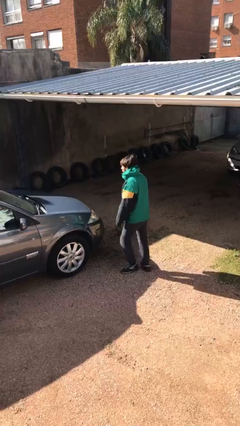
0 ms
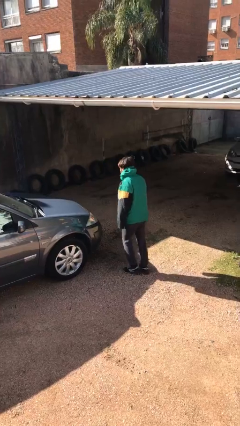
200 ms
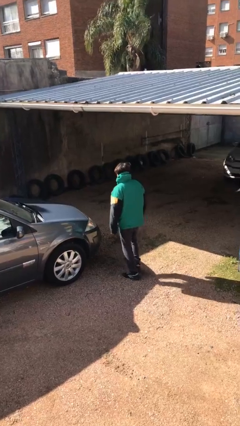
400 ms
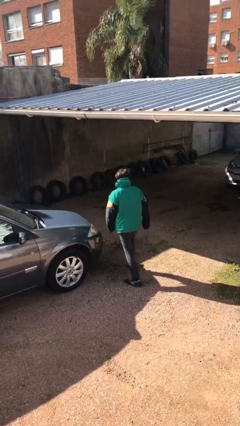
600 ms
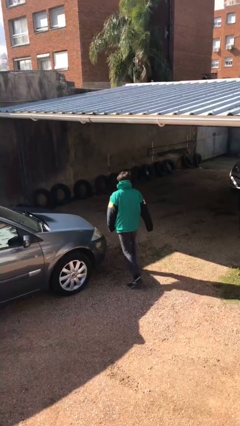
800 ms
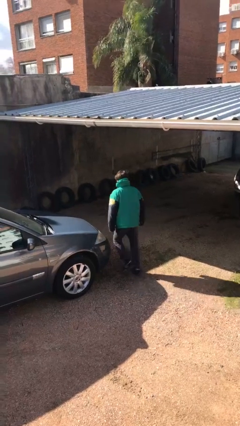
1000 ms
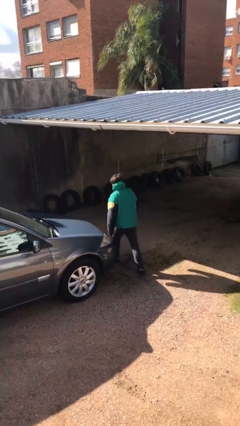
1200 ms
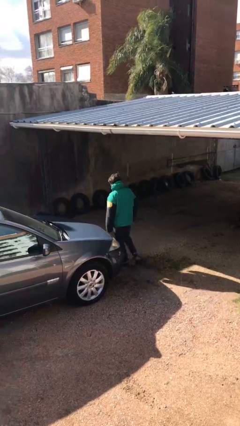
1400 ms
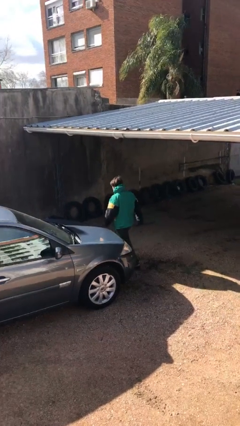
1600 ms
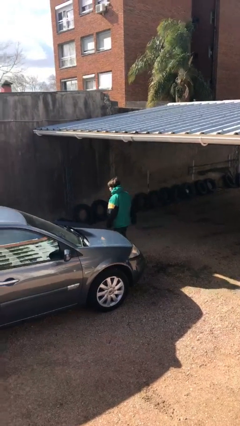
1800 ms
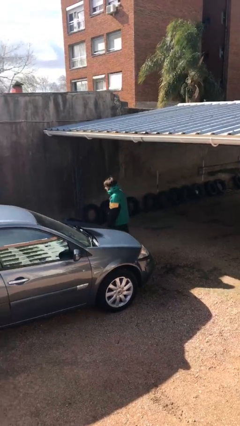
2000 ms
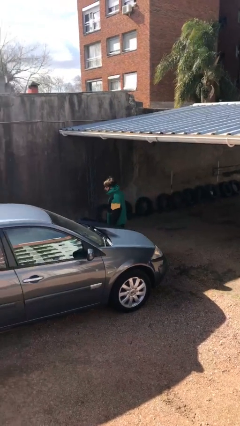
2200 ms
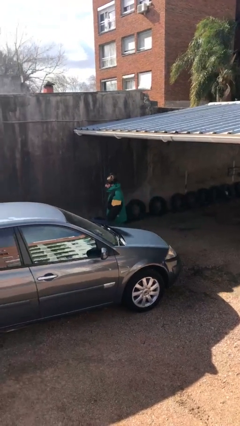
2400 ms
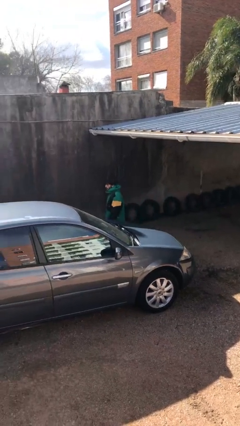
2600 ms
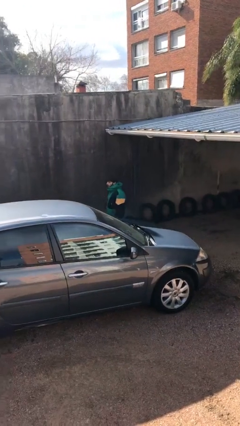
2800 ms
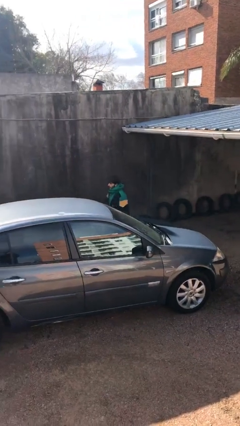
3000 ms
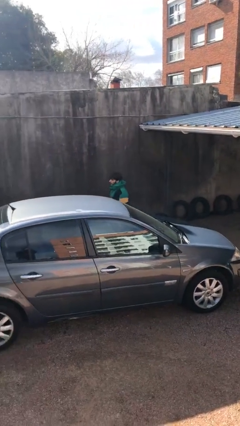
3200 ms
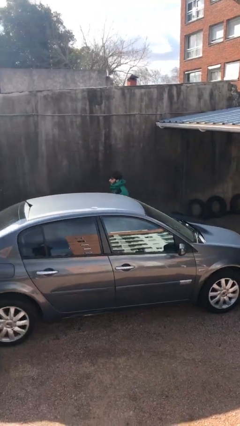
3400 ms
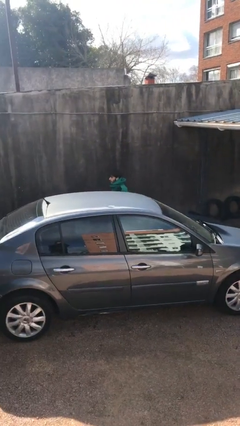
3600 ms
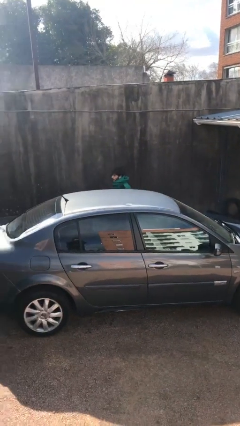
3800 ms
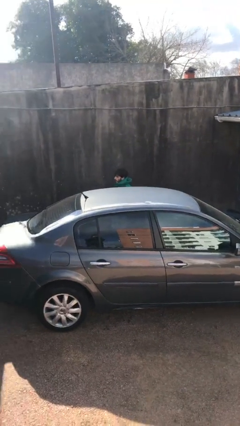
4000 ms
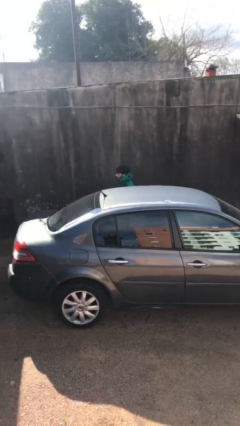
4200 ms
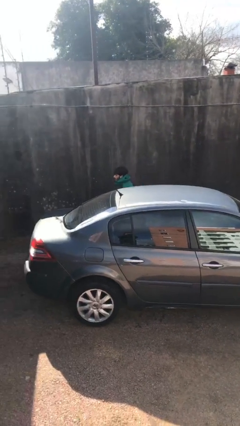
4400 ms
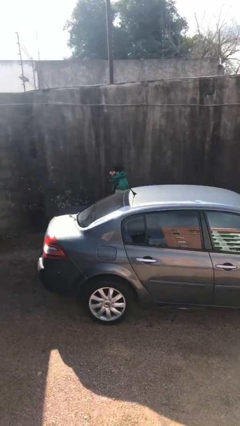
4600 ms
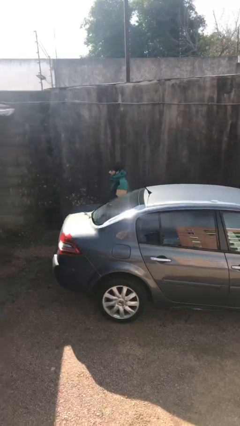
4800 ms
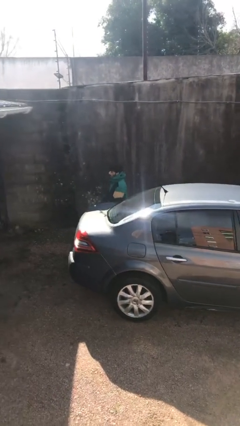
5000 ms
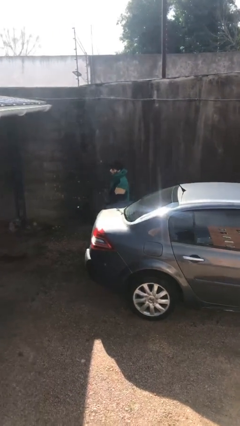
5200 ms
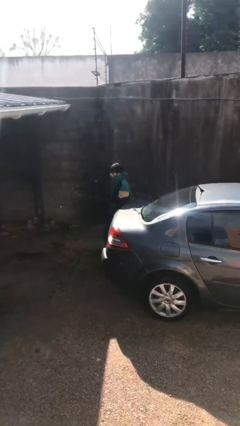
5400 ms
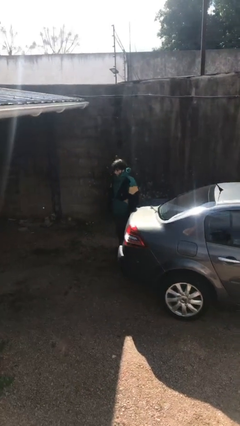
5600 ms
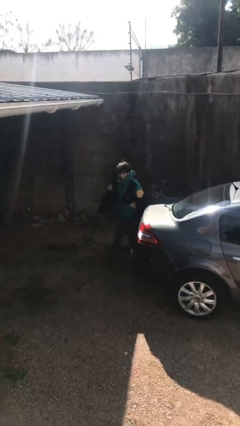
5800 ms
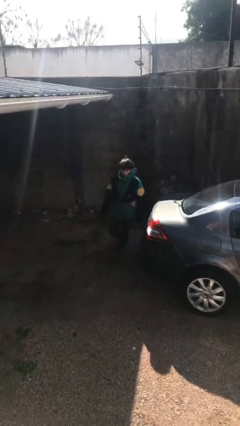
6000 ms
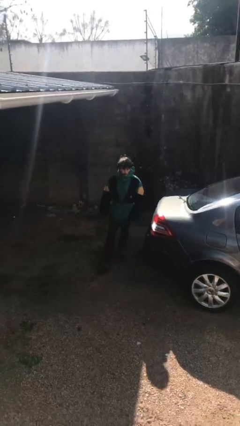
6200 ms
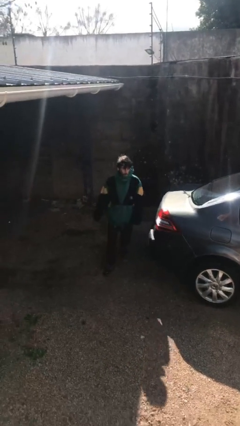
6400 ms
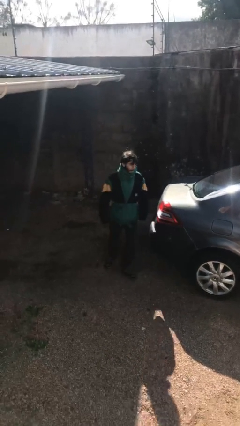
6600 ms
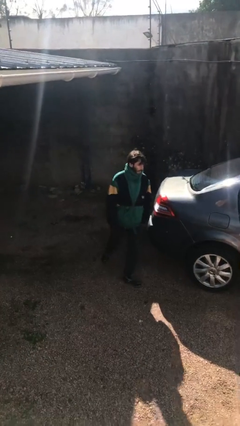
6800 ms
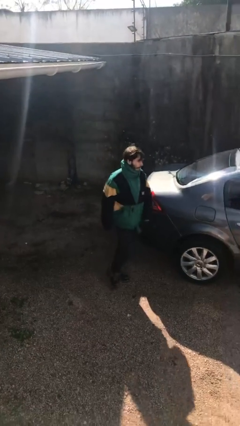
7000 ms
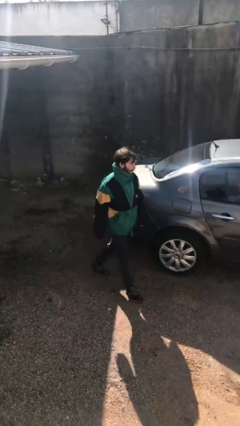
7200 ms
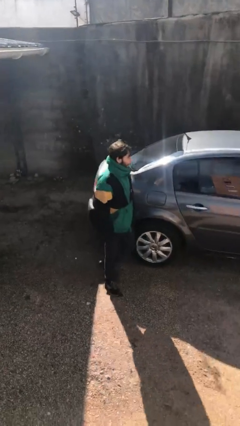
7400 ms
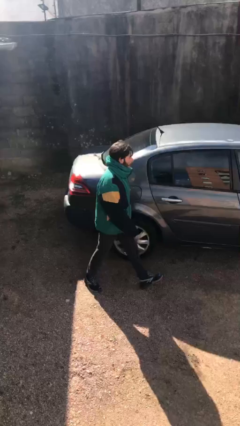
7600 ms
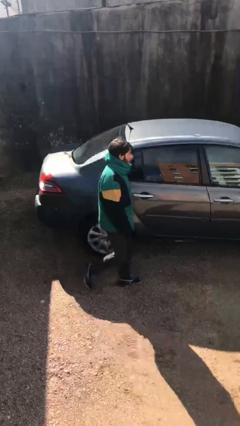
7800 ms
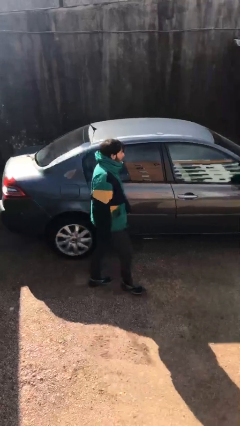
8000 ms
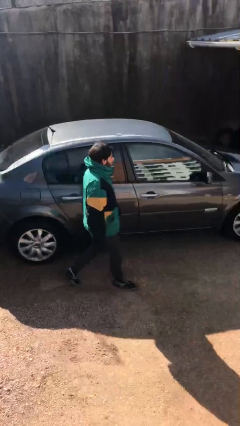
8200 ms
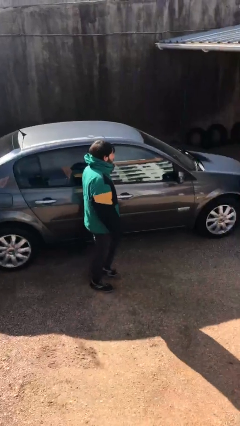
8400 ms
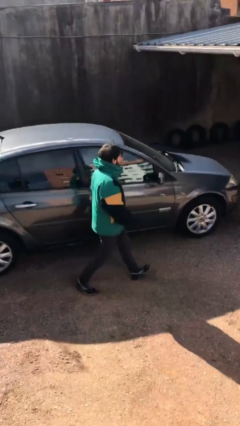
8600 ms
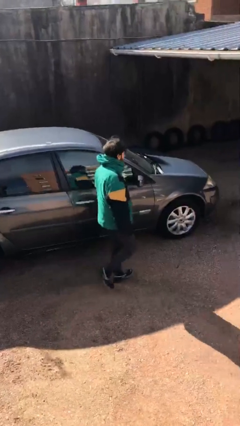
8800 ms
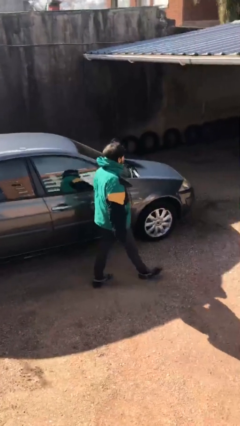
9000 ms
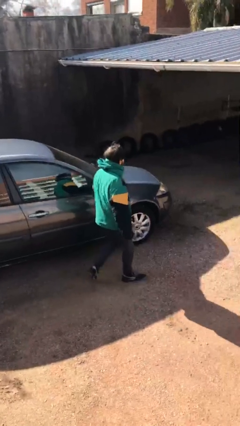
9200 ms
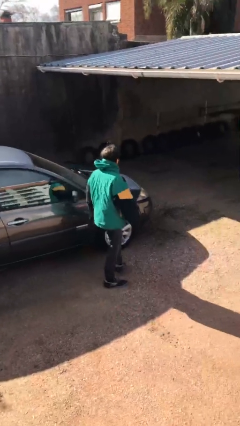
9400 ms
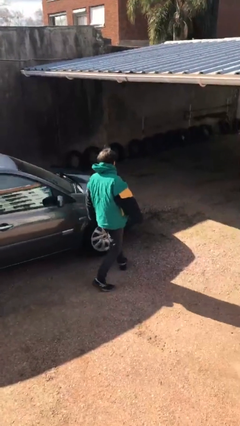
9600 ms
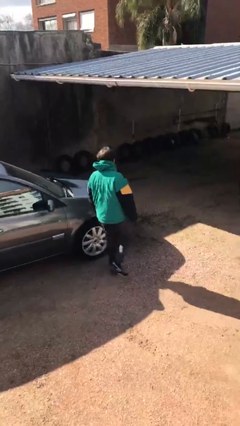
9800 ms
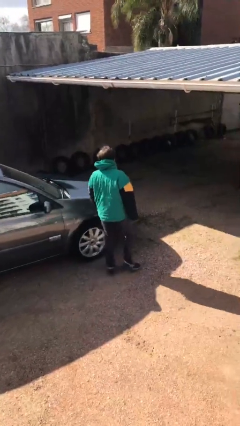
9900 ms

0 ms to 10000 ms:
person walks around car

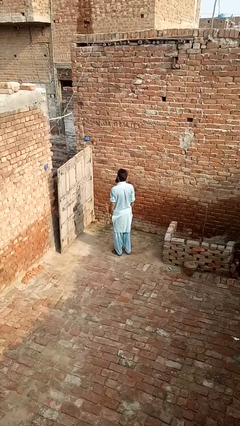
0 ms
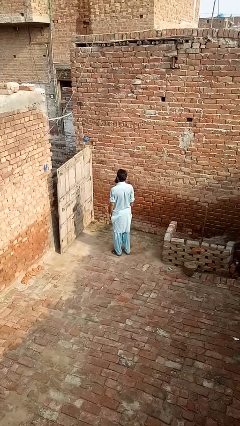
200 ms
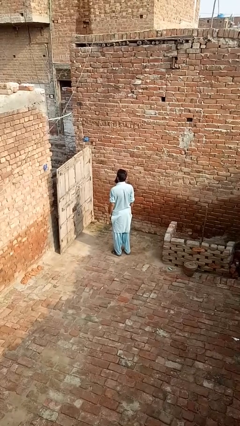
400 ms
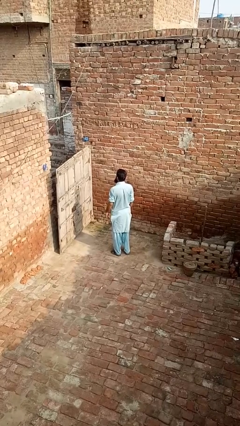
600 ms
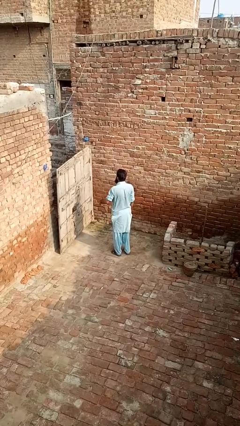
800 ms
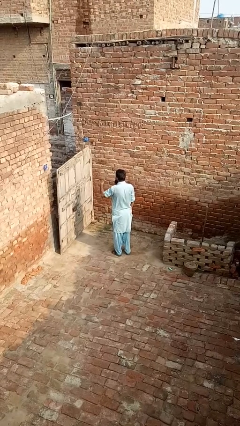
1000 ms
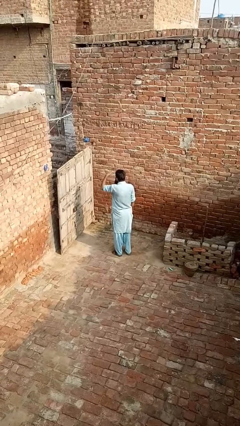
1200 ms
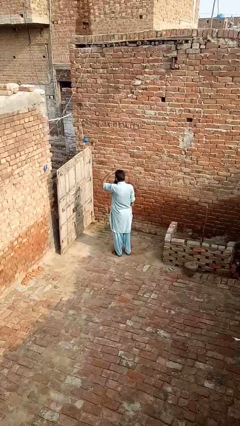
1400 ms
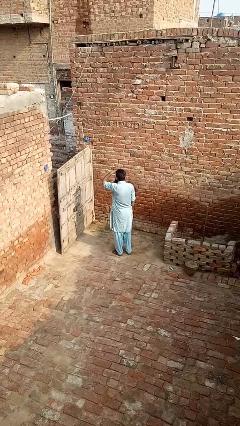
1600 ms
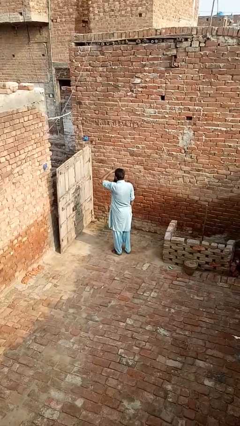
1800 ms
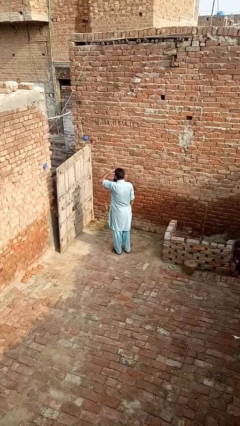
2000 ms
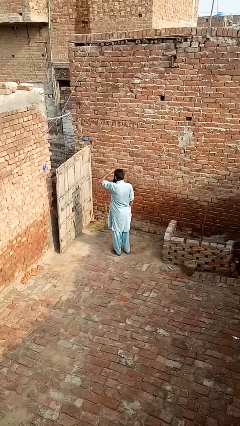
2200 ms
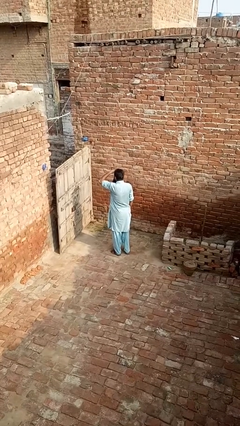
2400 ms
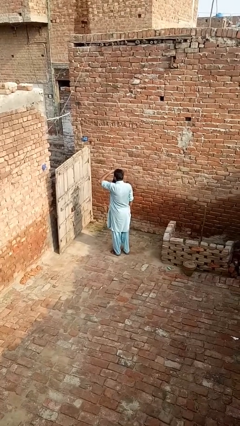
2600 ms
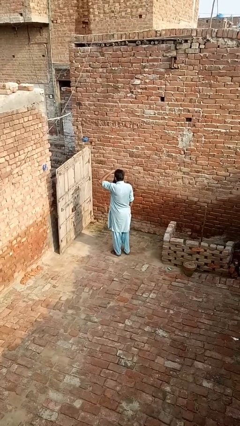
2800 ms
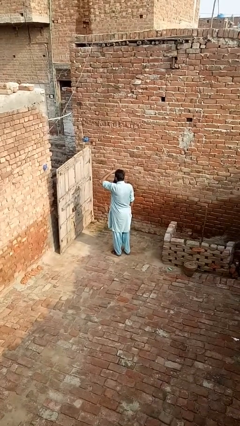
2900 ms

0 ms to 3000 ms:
person shades eyes

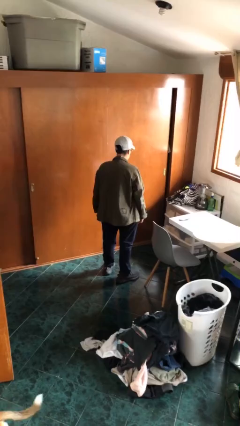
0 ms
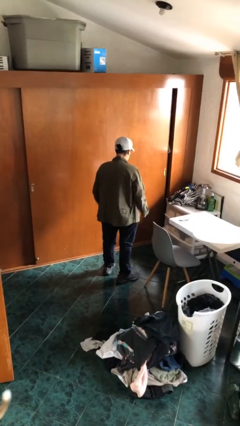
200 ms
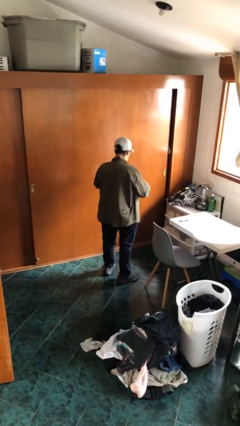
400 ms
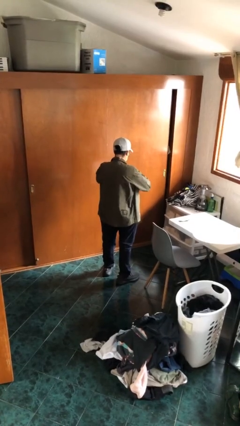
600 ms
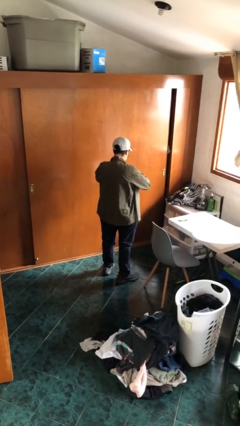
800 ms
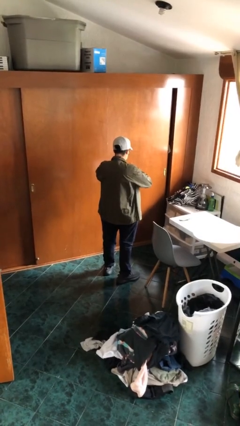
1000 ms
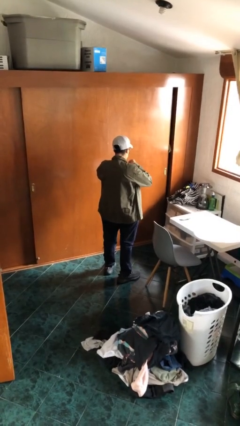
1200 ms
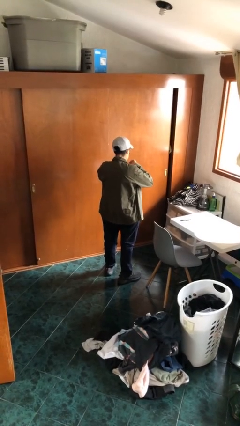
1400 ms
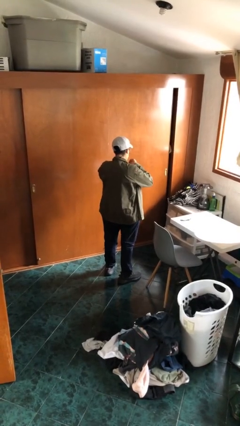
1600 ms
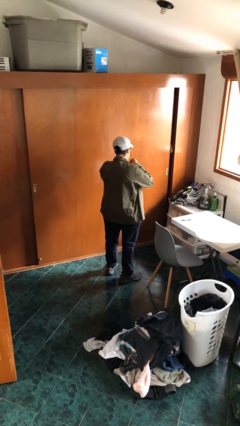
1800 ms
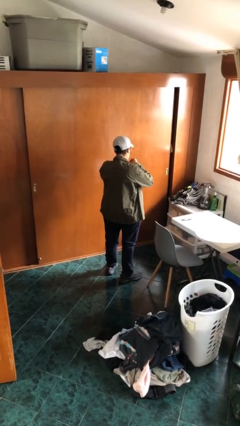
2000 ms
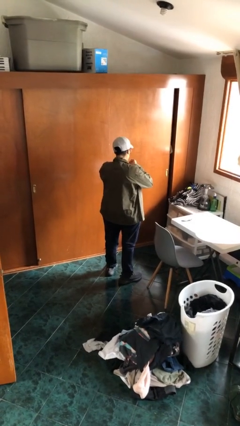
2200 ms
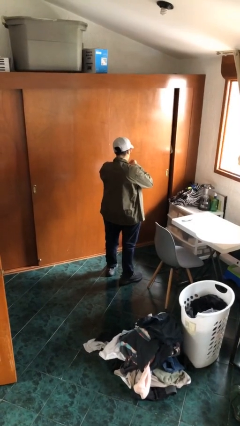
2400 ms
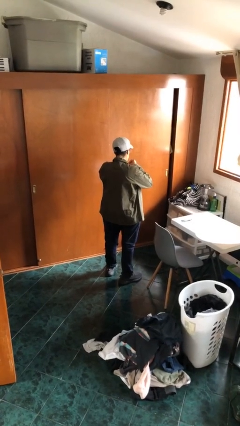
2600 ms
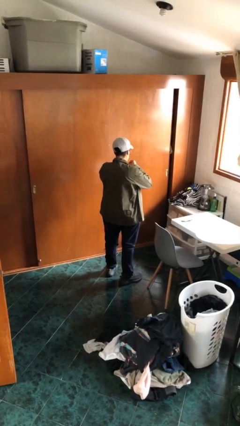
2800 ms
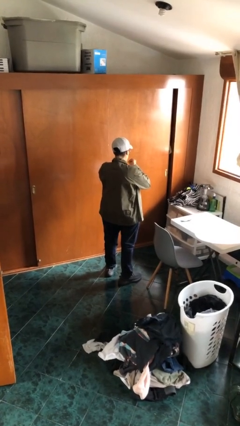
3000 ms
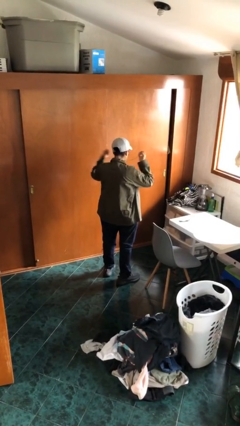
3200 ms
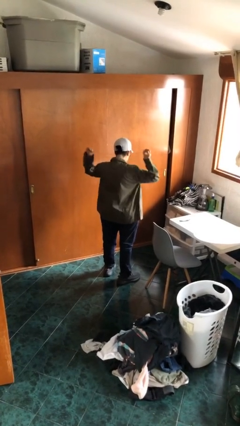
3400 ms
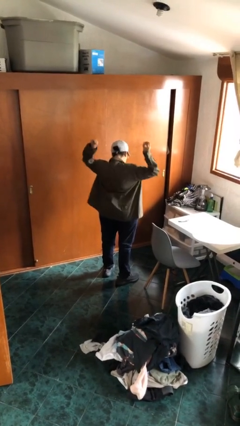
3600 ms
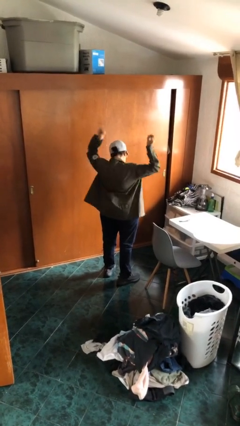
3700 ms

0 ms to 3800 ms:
person takes off necklace

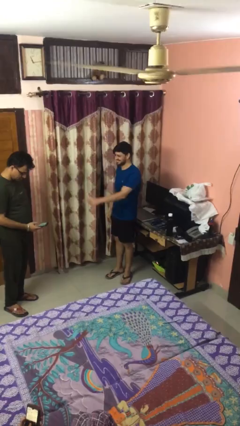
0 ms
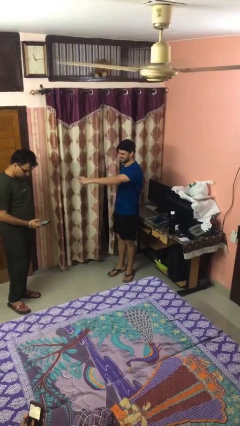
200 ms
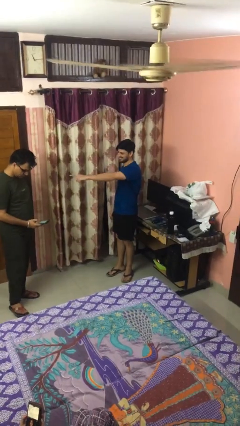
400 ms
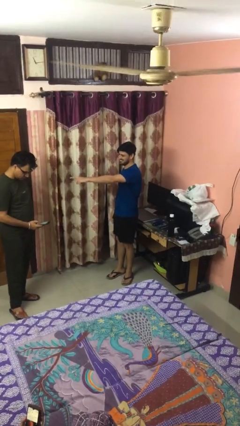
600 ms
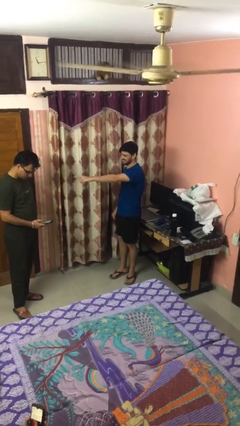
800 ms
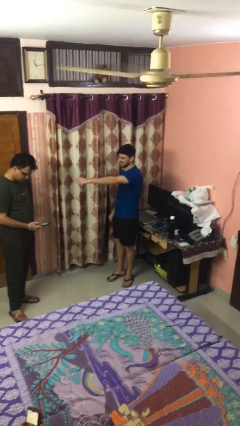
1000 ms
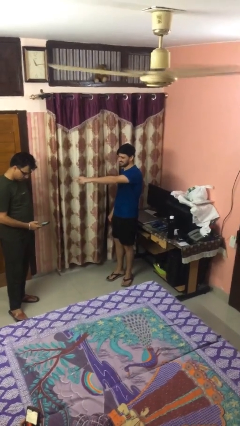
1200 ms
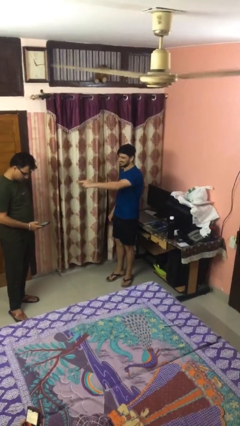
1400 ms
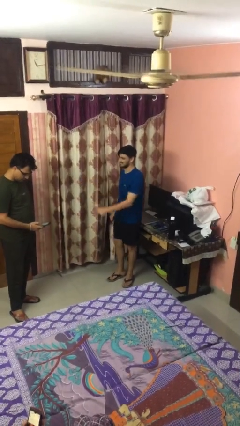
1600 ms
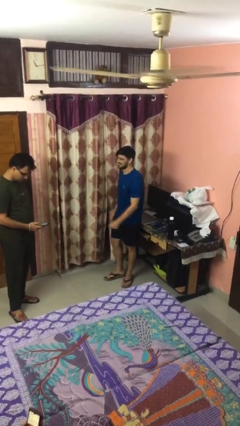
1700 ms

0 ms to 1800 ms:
person points at person
